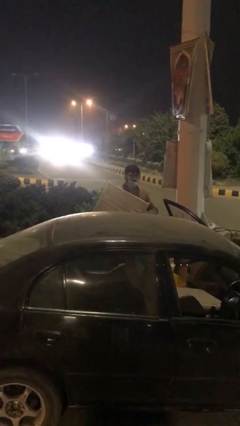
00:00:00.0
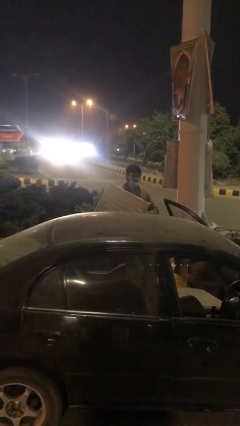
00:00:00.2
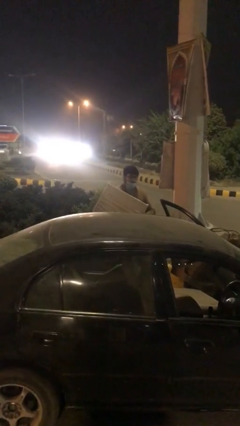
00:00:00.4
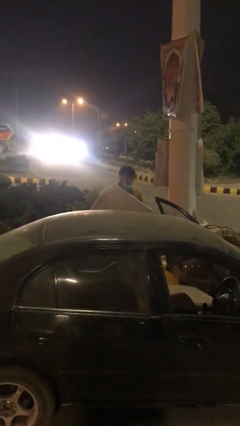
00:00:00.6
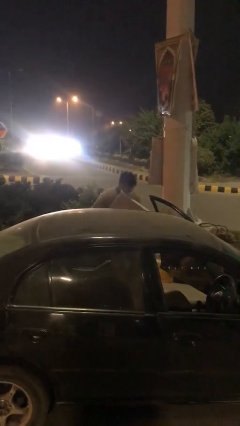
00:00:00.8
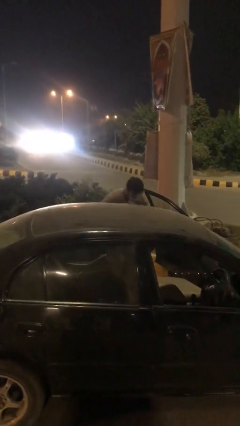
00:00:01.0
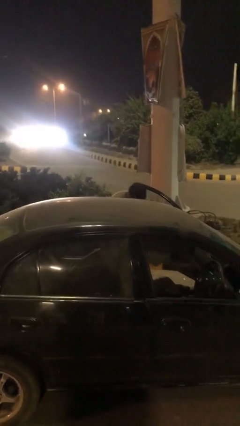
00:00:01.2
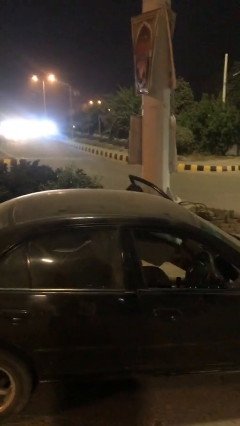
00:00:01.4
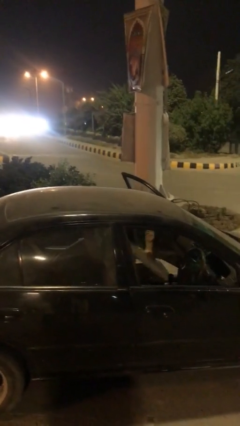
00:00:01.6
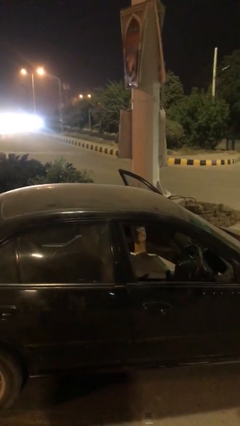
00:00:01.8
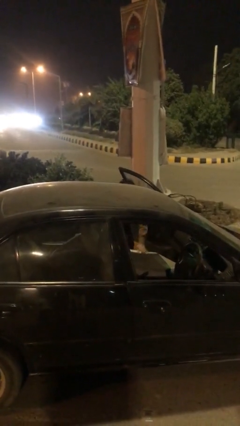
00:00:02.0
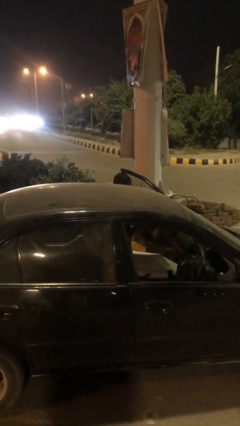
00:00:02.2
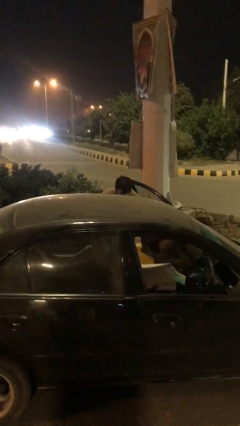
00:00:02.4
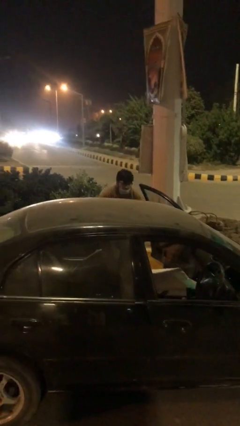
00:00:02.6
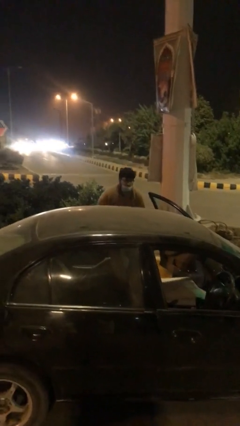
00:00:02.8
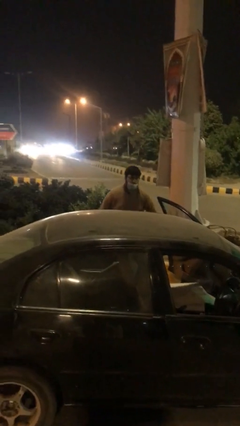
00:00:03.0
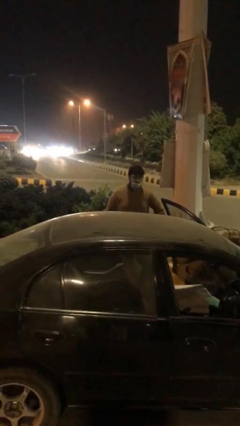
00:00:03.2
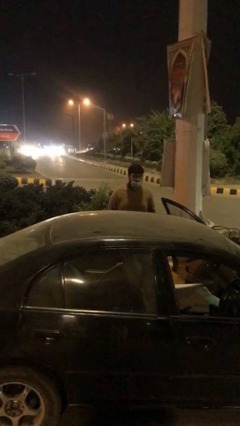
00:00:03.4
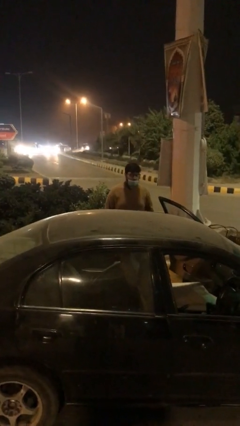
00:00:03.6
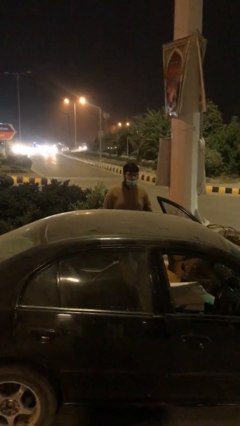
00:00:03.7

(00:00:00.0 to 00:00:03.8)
person loads car

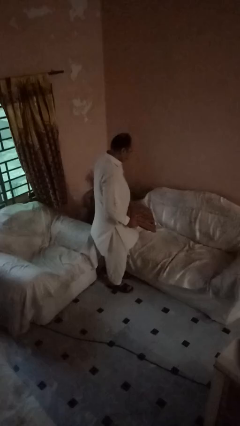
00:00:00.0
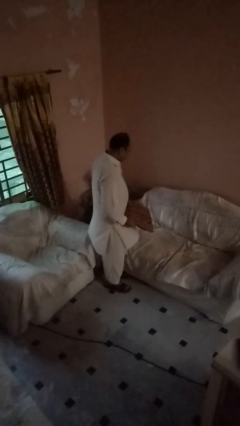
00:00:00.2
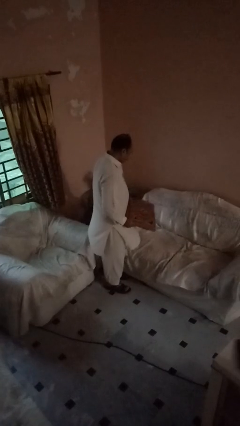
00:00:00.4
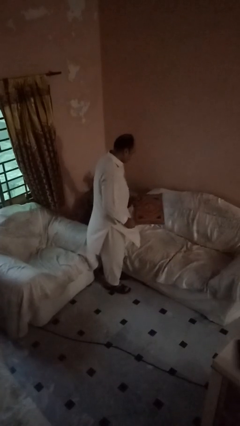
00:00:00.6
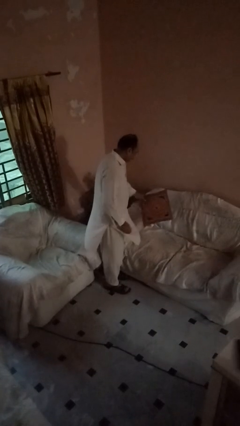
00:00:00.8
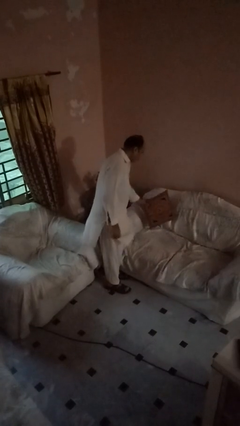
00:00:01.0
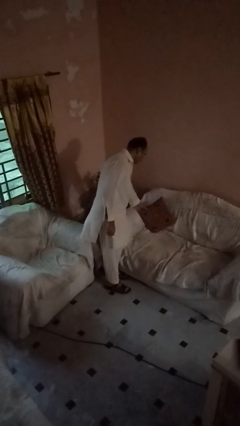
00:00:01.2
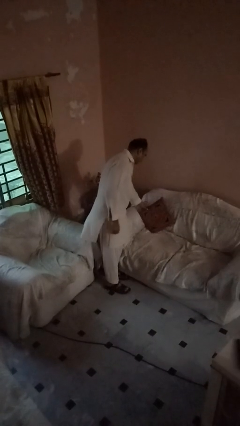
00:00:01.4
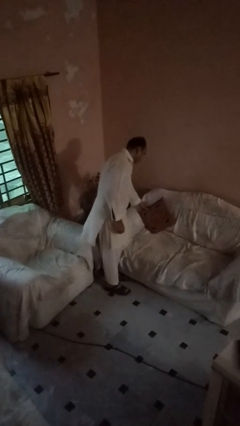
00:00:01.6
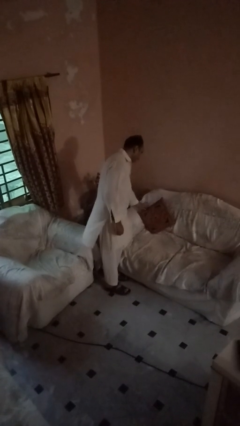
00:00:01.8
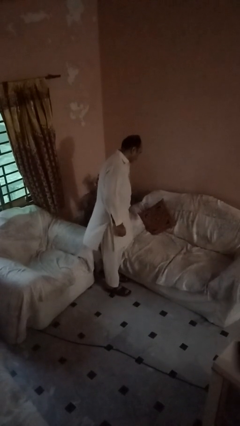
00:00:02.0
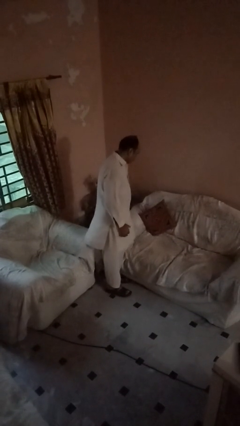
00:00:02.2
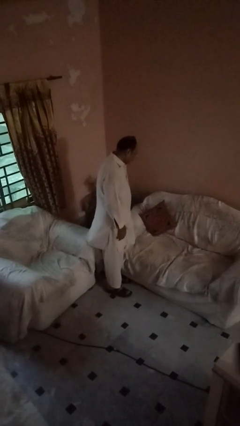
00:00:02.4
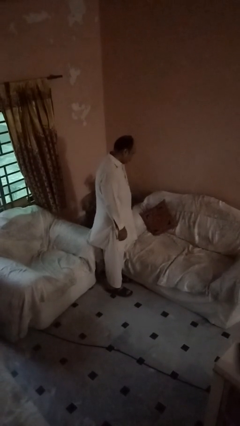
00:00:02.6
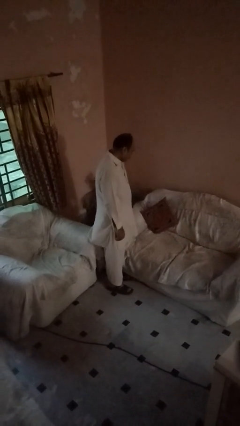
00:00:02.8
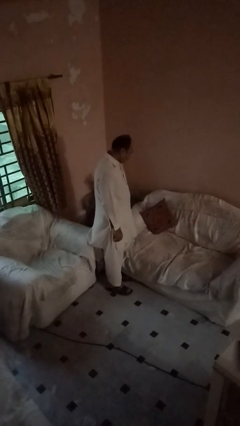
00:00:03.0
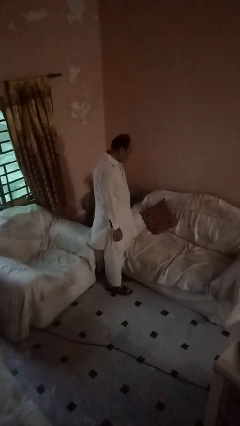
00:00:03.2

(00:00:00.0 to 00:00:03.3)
person puts down object on couch

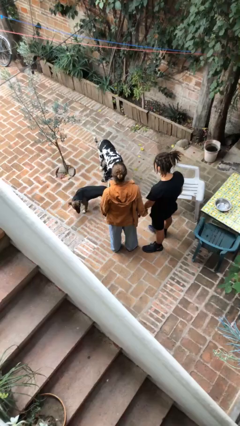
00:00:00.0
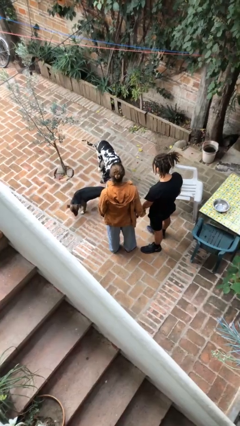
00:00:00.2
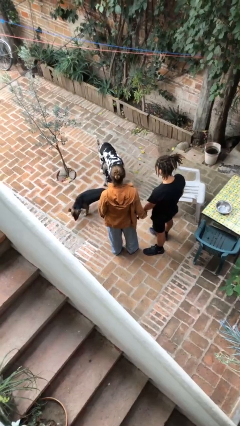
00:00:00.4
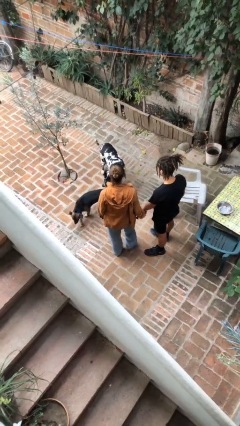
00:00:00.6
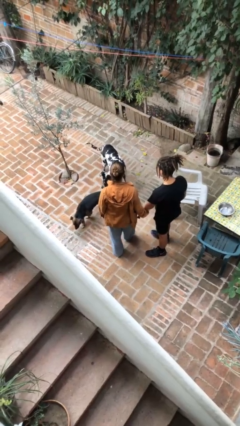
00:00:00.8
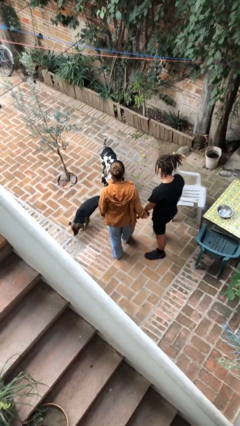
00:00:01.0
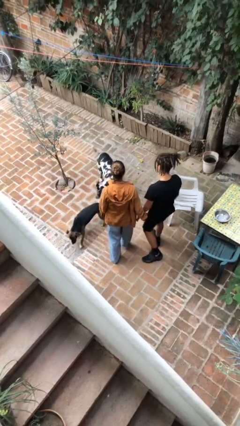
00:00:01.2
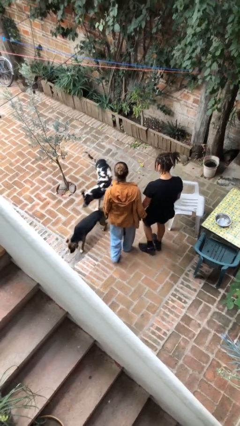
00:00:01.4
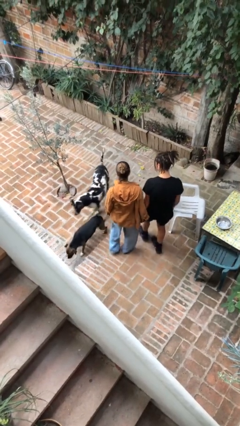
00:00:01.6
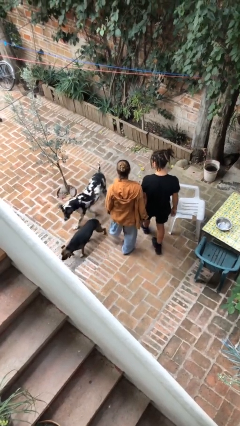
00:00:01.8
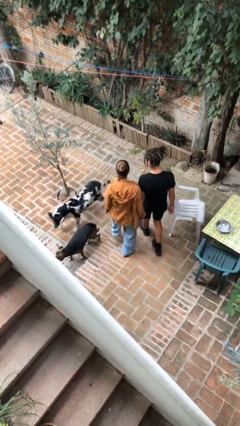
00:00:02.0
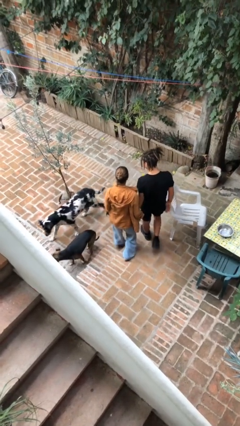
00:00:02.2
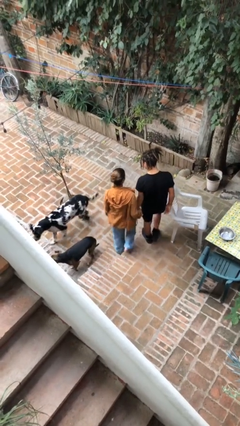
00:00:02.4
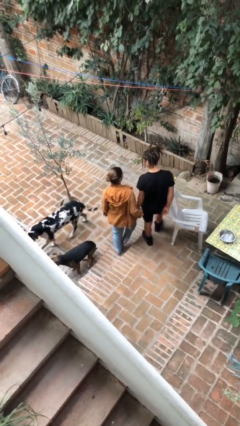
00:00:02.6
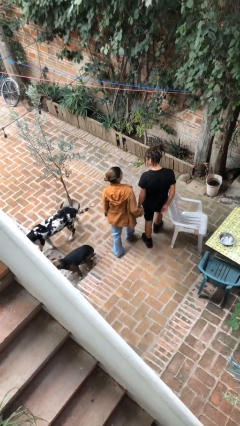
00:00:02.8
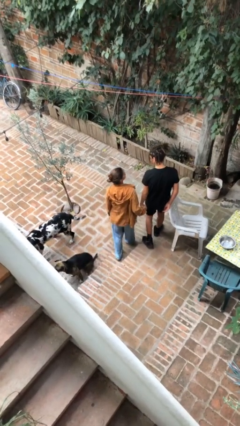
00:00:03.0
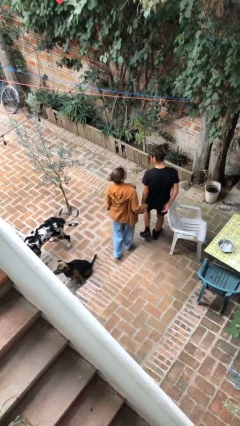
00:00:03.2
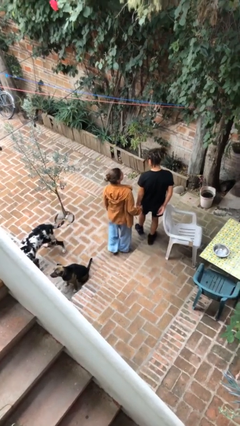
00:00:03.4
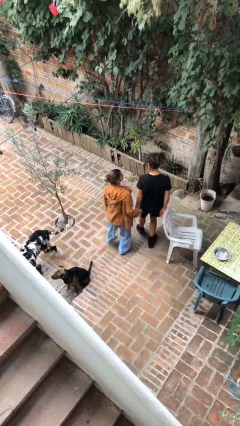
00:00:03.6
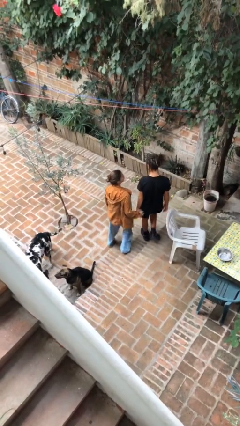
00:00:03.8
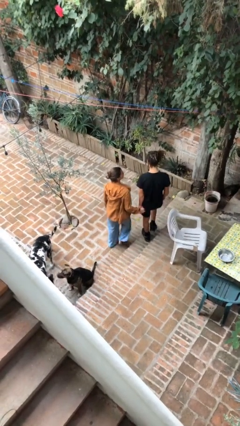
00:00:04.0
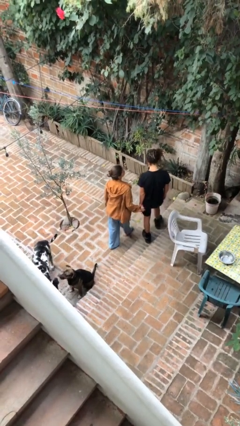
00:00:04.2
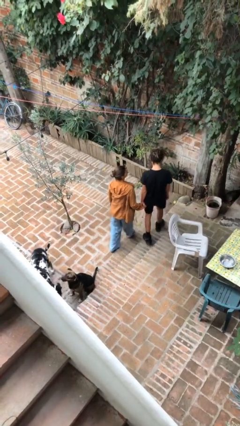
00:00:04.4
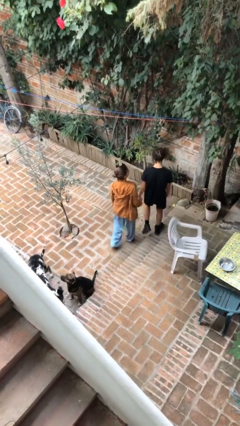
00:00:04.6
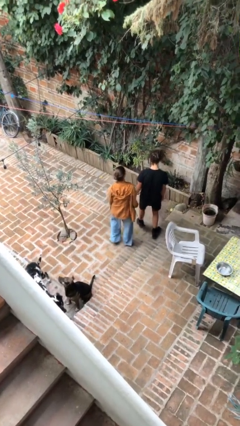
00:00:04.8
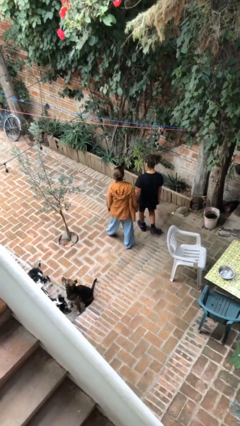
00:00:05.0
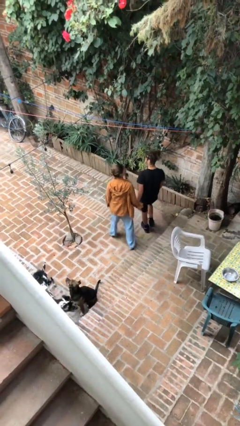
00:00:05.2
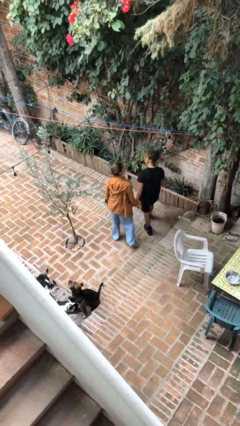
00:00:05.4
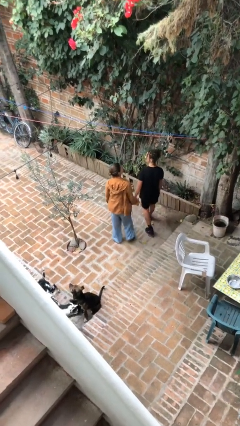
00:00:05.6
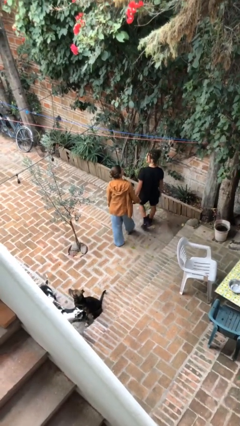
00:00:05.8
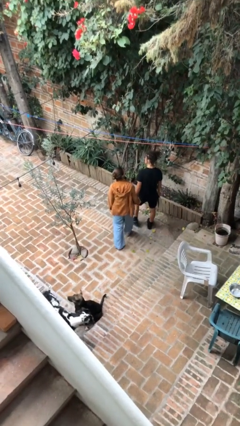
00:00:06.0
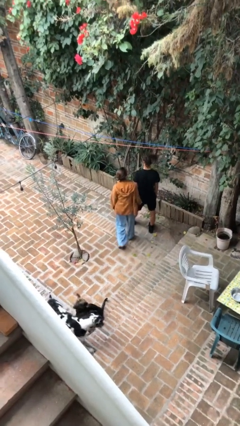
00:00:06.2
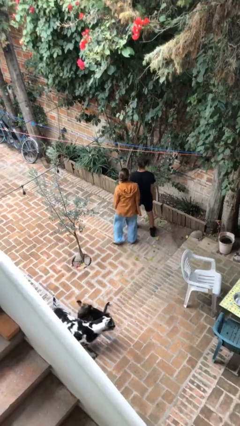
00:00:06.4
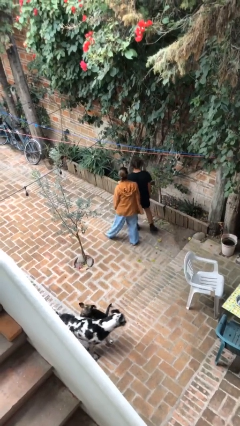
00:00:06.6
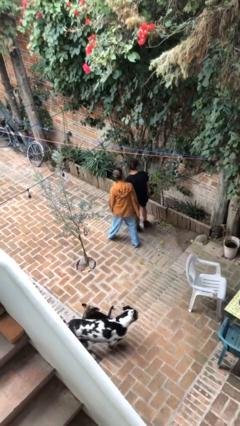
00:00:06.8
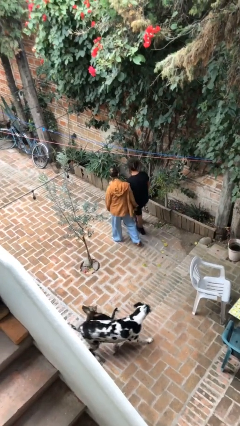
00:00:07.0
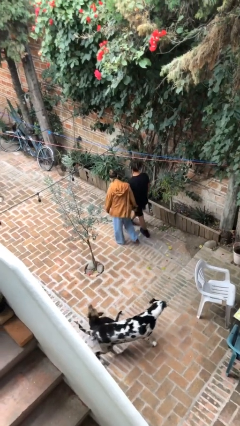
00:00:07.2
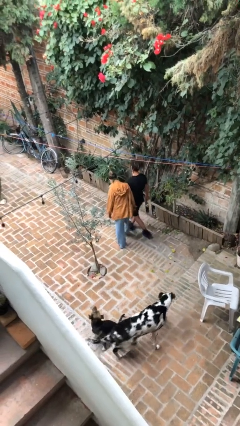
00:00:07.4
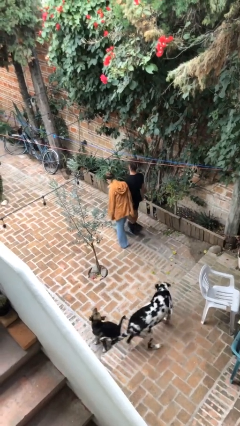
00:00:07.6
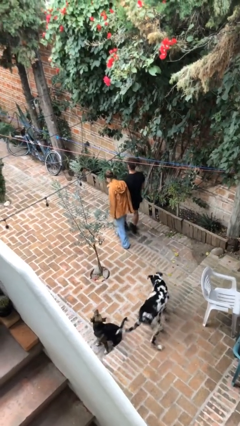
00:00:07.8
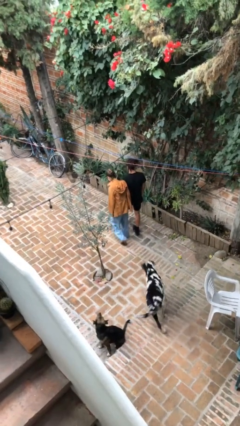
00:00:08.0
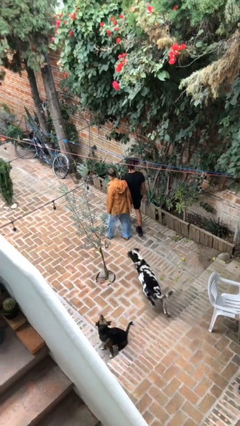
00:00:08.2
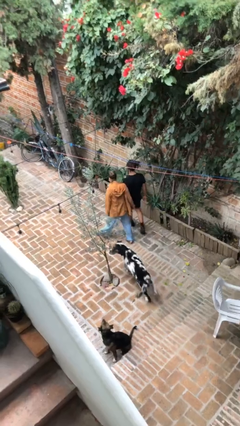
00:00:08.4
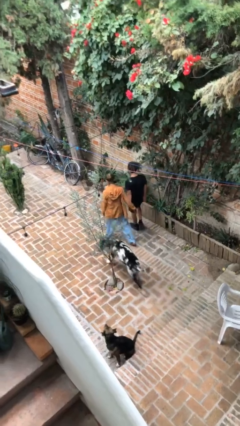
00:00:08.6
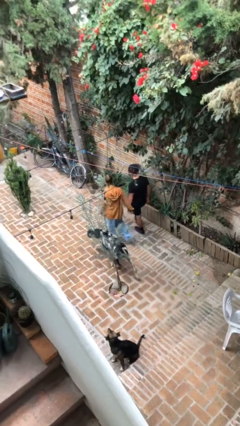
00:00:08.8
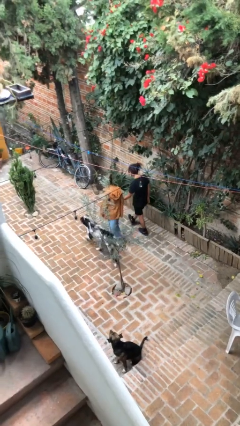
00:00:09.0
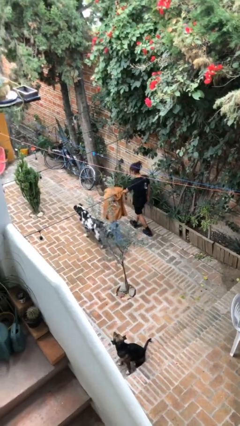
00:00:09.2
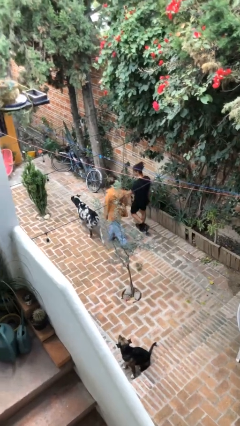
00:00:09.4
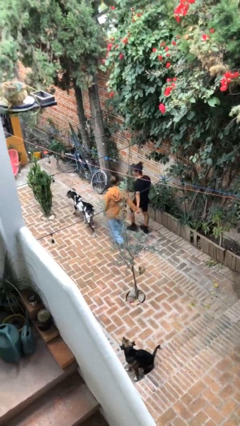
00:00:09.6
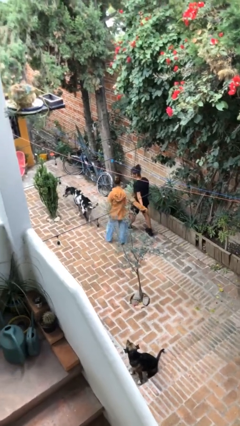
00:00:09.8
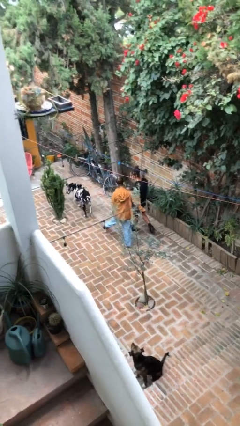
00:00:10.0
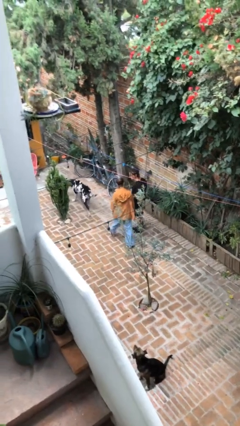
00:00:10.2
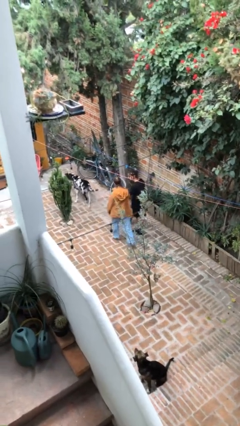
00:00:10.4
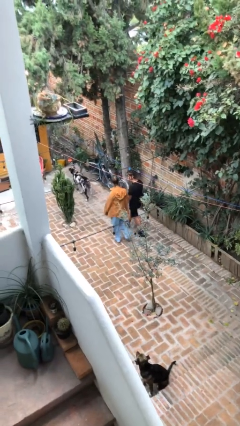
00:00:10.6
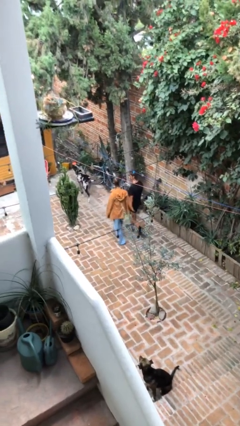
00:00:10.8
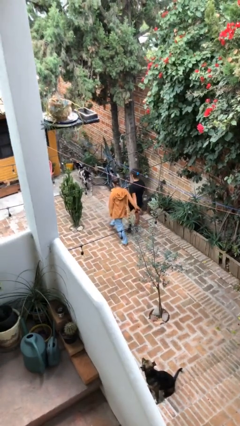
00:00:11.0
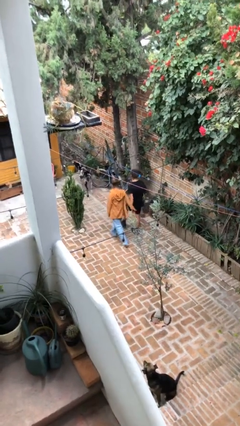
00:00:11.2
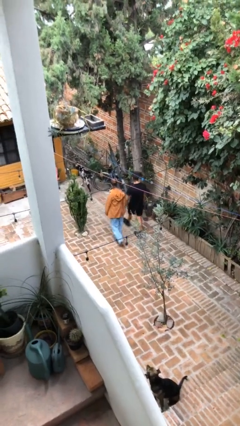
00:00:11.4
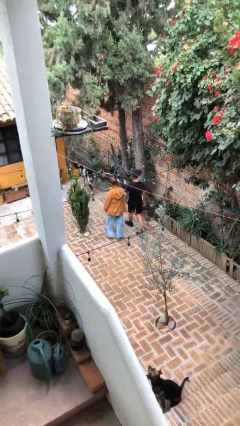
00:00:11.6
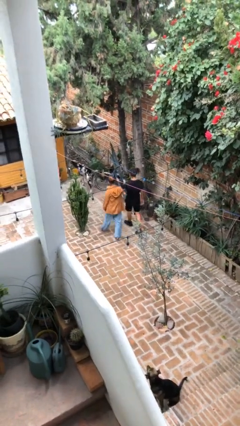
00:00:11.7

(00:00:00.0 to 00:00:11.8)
person holds hand
